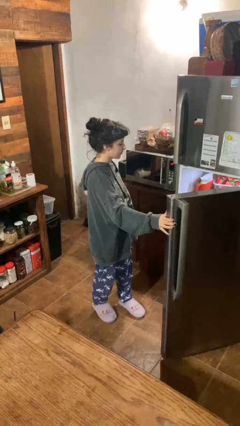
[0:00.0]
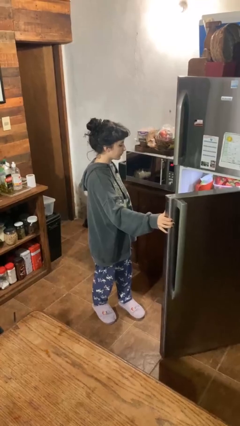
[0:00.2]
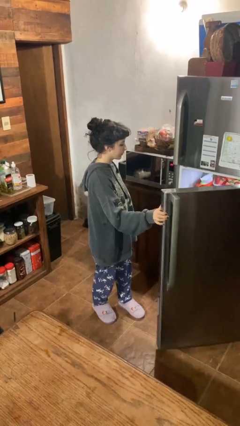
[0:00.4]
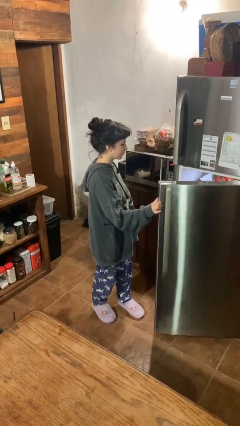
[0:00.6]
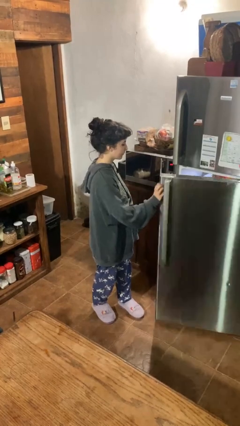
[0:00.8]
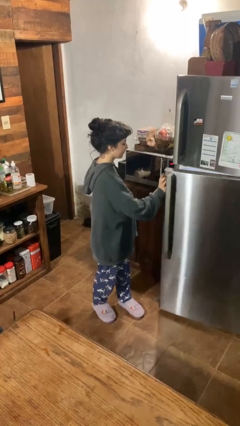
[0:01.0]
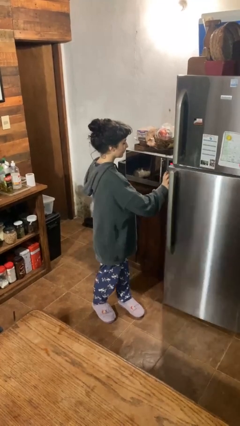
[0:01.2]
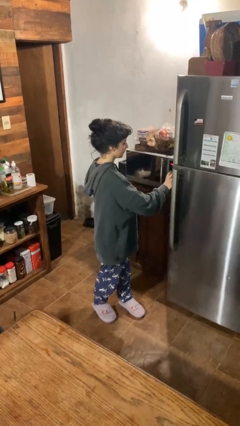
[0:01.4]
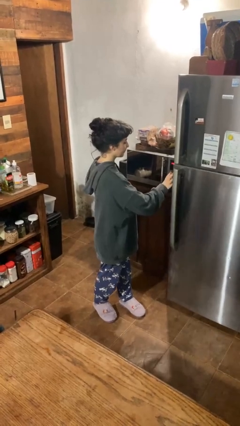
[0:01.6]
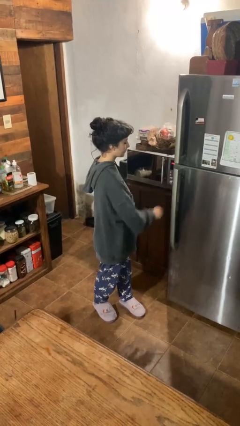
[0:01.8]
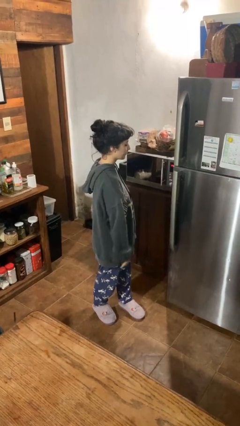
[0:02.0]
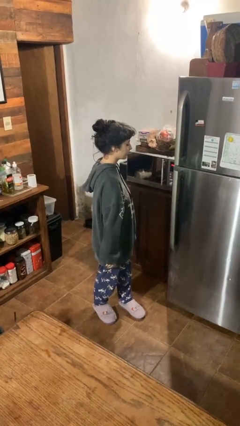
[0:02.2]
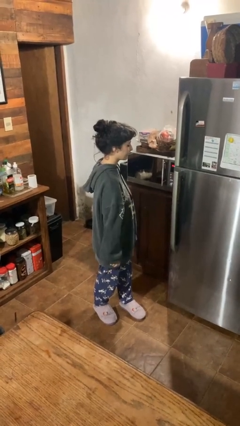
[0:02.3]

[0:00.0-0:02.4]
person closes refrigerator

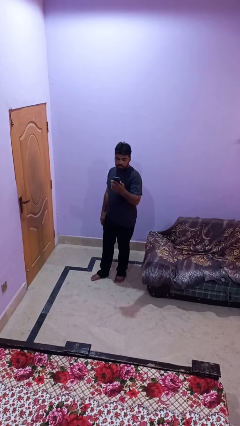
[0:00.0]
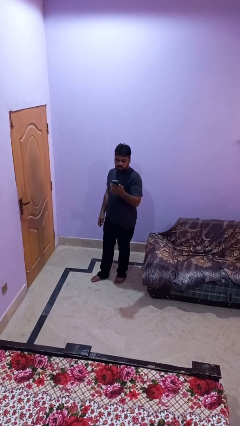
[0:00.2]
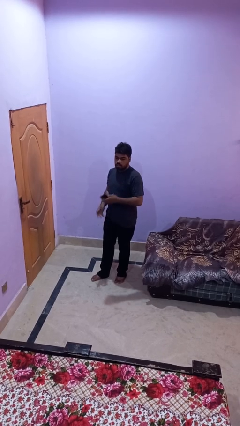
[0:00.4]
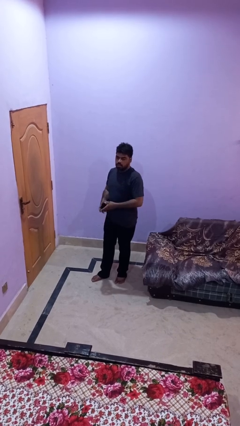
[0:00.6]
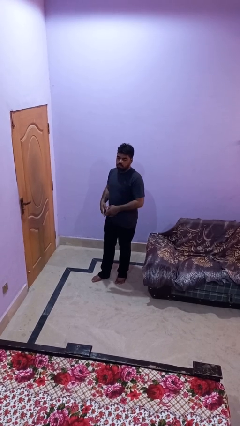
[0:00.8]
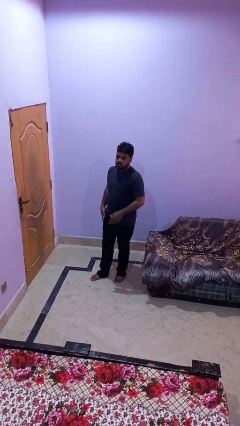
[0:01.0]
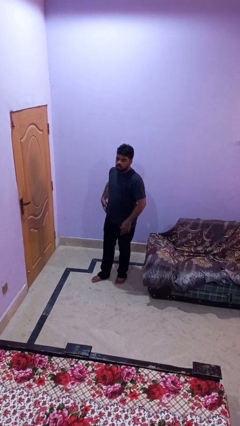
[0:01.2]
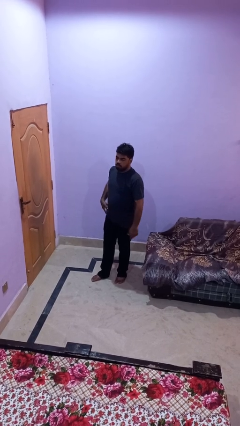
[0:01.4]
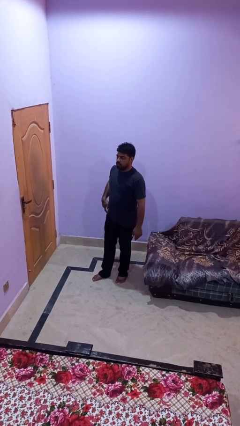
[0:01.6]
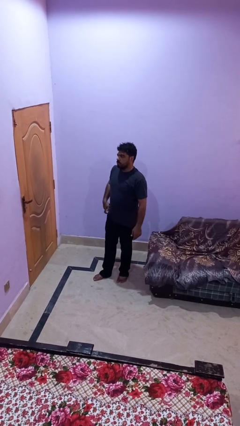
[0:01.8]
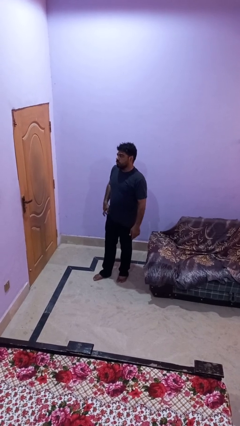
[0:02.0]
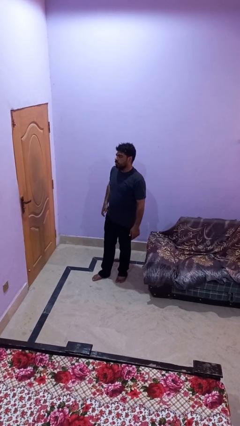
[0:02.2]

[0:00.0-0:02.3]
person puts phone into pocket

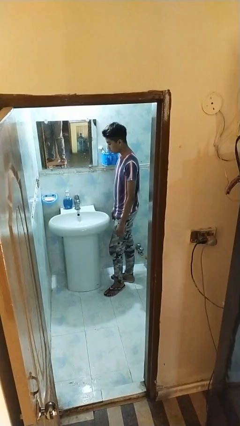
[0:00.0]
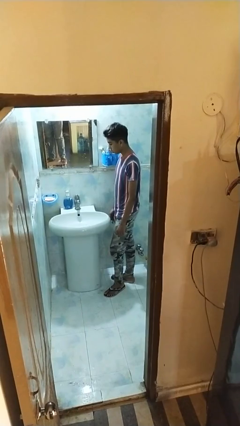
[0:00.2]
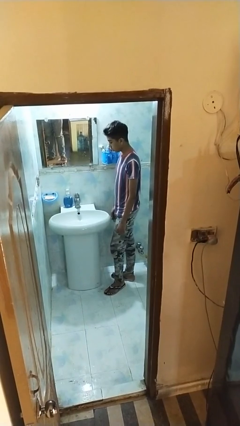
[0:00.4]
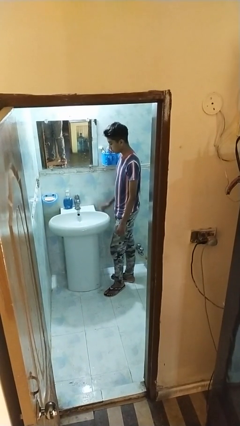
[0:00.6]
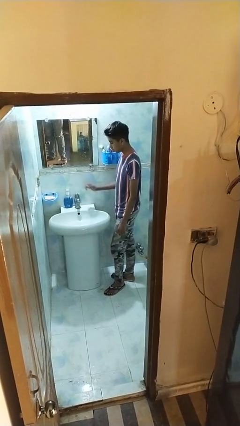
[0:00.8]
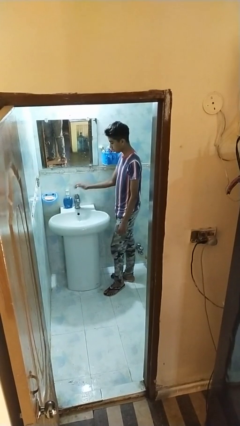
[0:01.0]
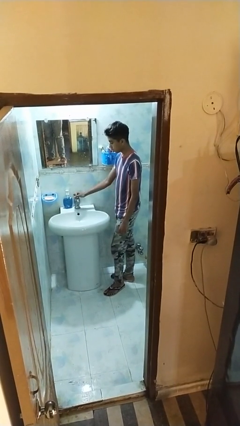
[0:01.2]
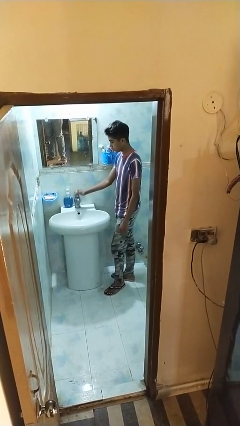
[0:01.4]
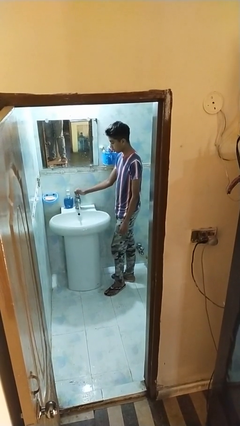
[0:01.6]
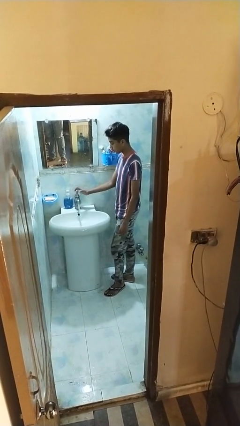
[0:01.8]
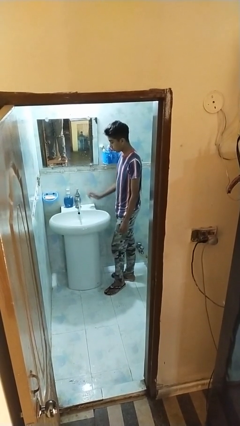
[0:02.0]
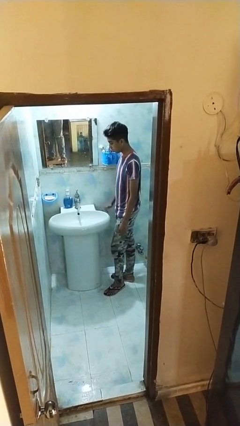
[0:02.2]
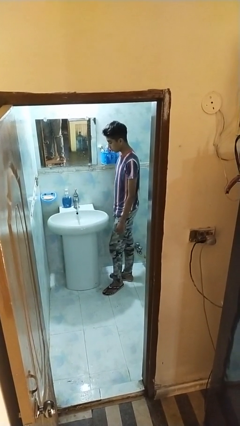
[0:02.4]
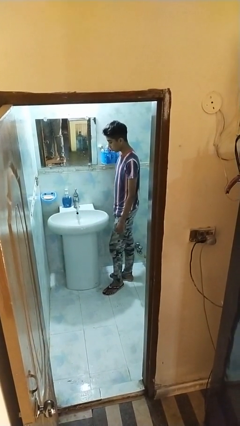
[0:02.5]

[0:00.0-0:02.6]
person turns on faucet

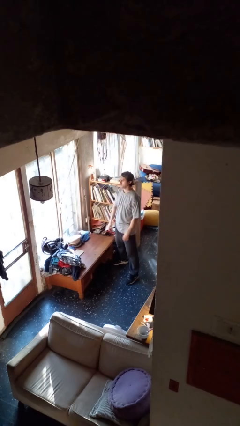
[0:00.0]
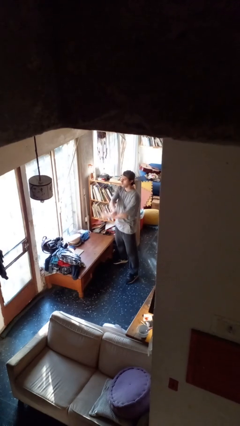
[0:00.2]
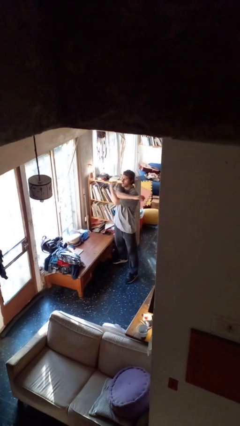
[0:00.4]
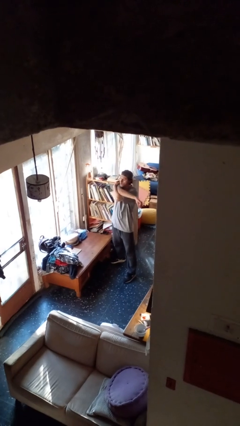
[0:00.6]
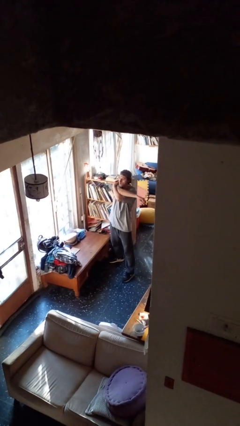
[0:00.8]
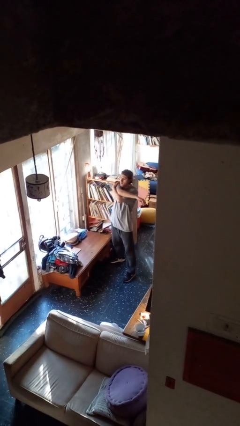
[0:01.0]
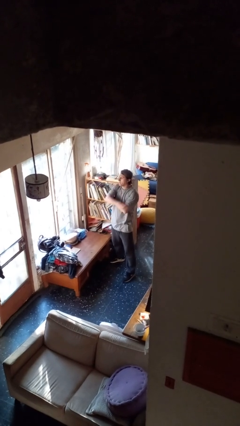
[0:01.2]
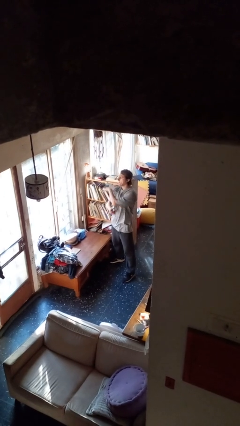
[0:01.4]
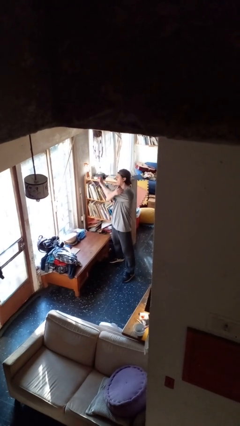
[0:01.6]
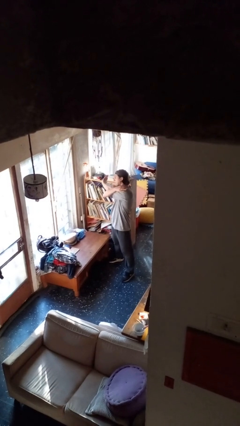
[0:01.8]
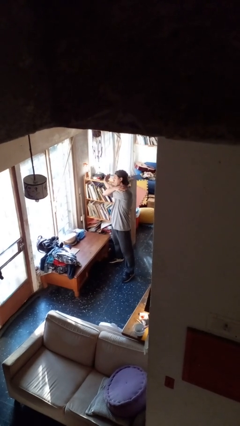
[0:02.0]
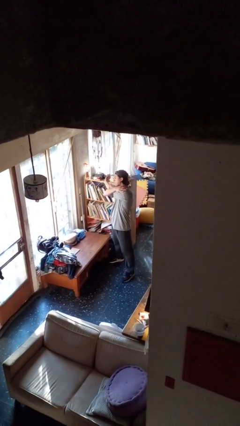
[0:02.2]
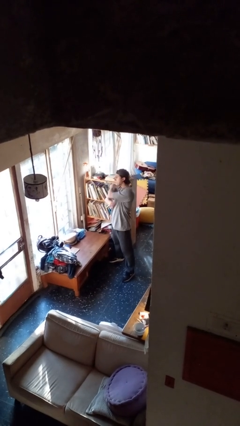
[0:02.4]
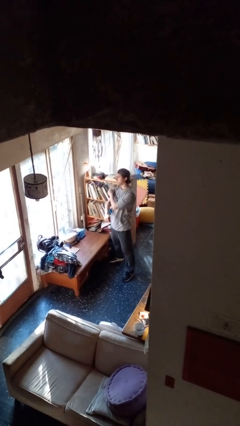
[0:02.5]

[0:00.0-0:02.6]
person stretches arms to side

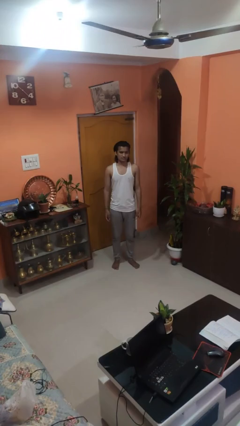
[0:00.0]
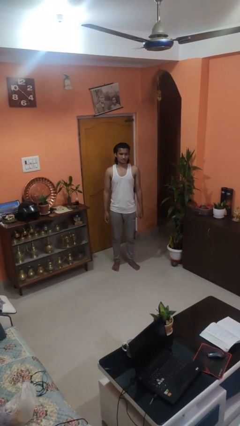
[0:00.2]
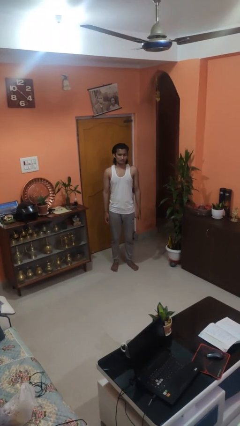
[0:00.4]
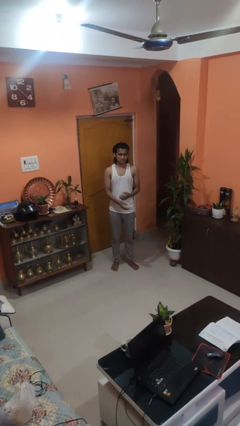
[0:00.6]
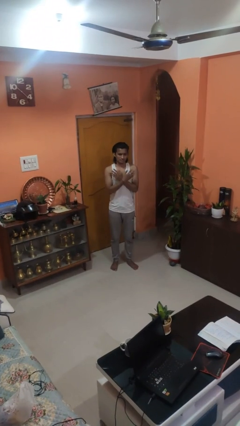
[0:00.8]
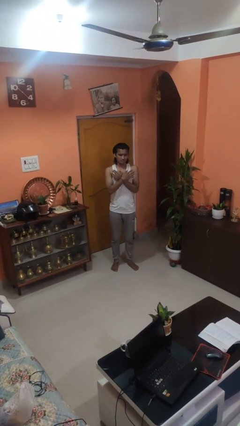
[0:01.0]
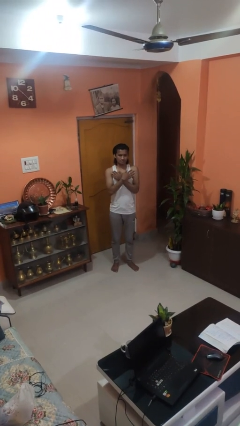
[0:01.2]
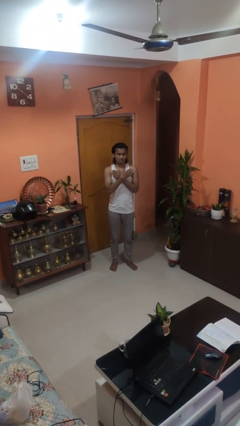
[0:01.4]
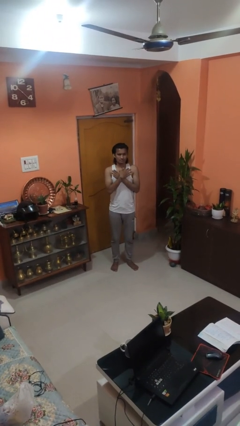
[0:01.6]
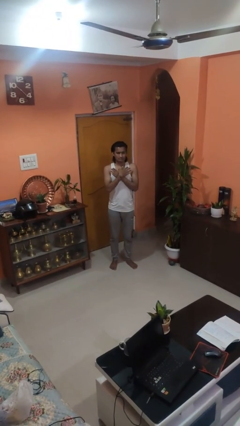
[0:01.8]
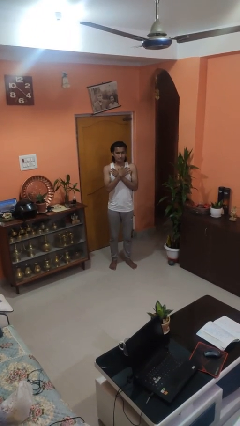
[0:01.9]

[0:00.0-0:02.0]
person drums on chest

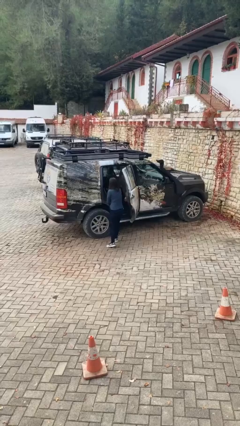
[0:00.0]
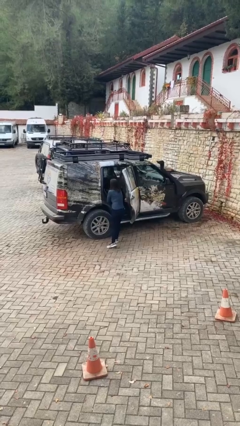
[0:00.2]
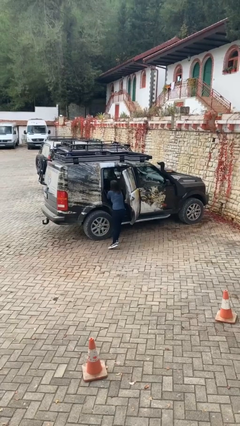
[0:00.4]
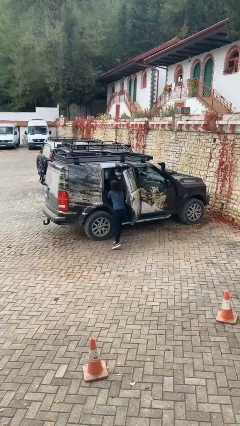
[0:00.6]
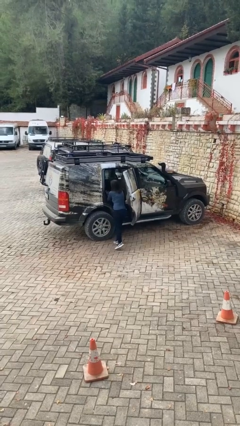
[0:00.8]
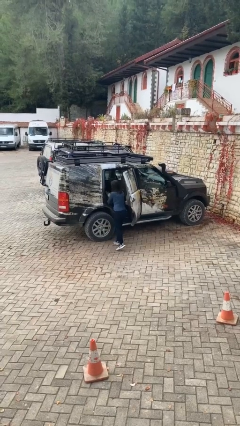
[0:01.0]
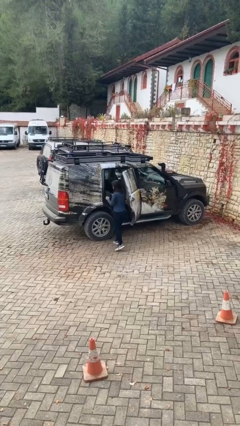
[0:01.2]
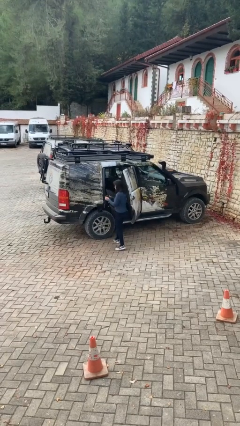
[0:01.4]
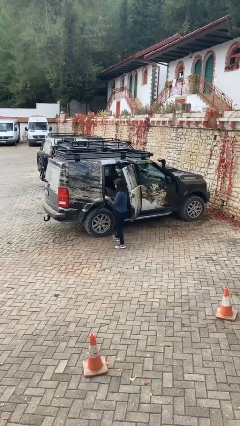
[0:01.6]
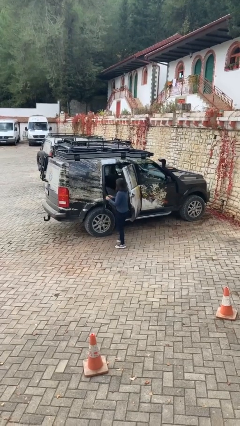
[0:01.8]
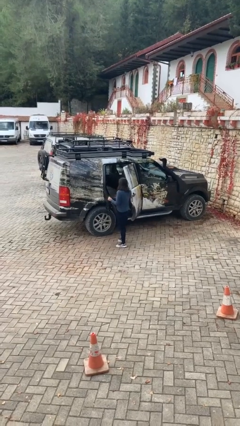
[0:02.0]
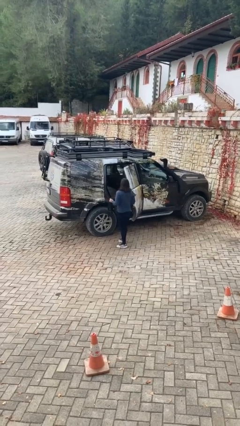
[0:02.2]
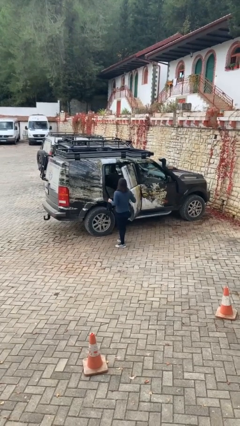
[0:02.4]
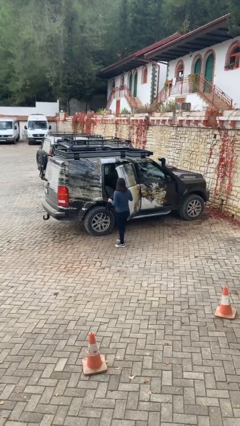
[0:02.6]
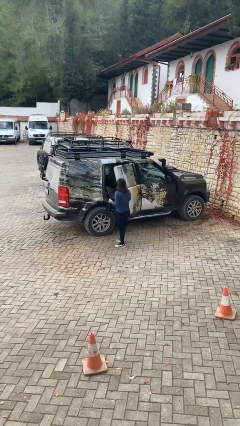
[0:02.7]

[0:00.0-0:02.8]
person unloads car

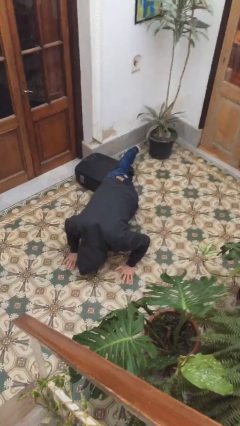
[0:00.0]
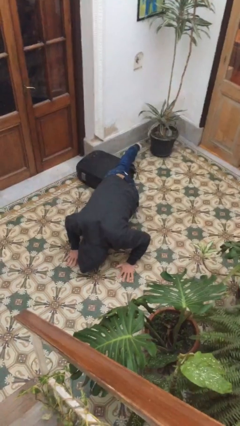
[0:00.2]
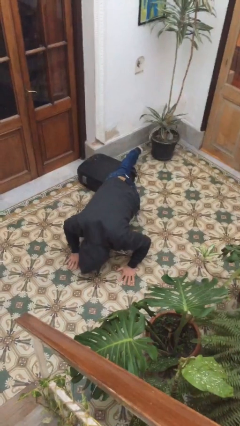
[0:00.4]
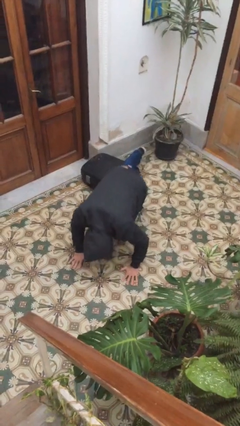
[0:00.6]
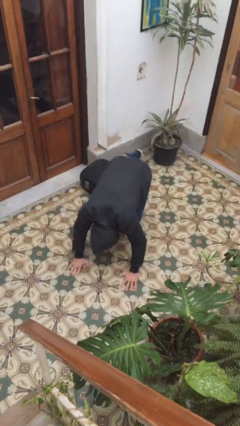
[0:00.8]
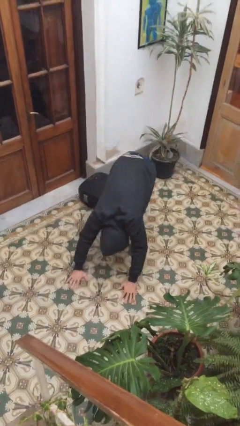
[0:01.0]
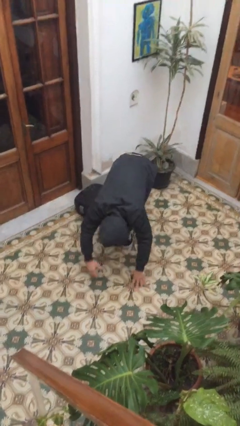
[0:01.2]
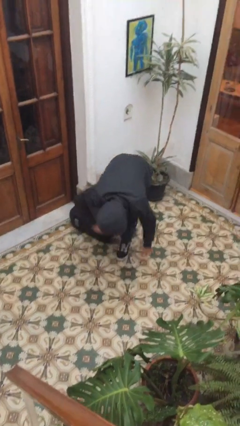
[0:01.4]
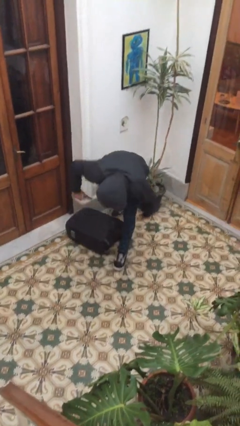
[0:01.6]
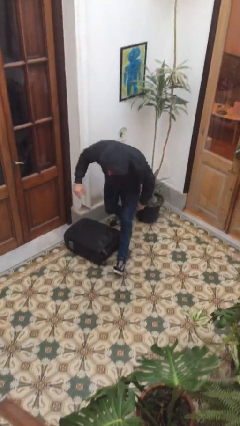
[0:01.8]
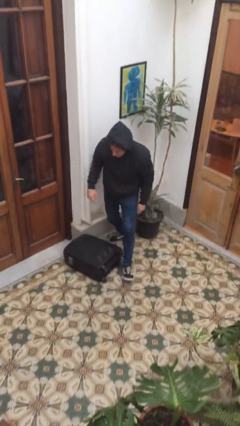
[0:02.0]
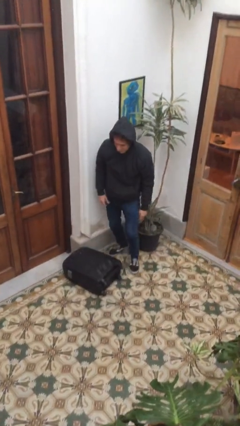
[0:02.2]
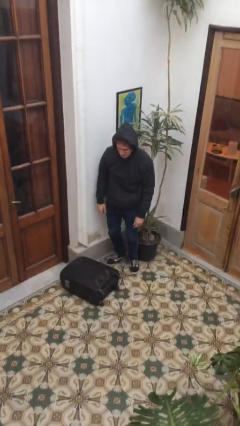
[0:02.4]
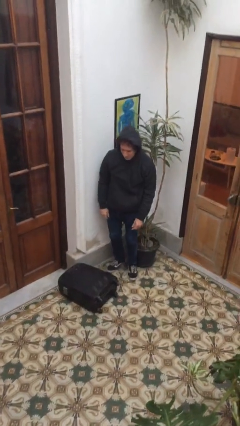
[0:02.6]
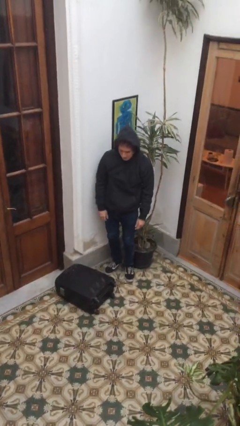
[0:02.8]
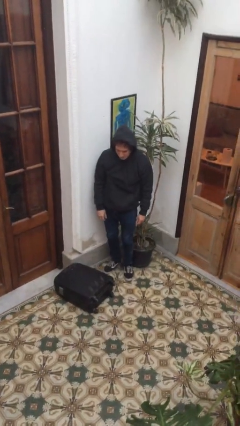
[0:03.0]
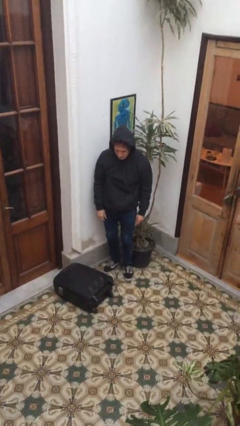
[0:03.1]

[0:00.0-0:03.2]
person stands up from floor
